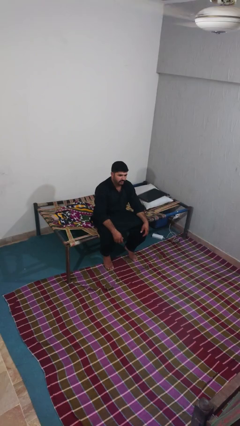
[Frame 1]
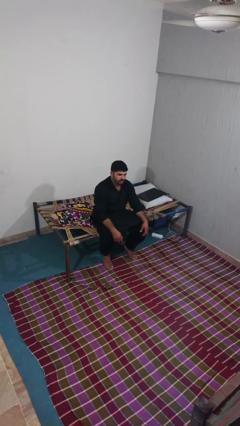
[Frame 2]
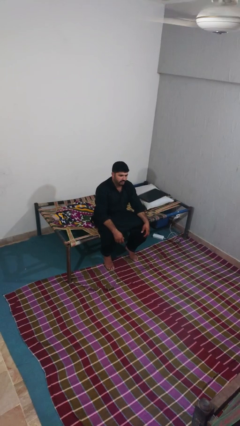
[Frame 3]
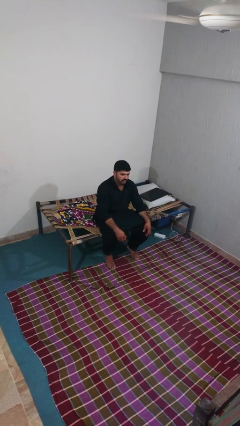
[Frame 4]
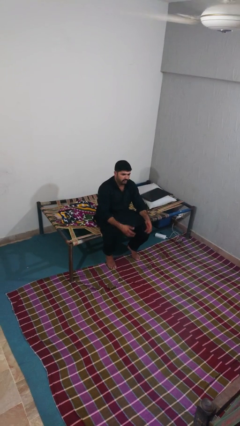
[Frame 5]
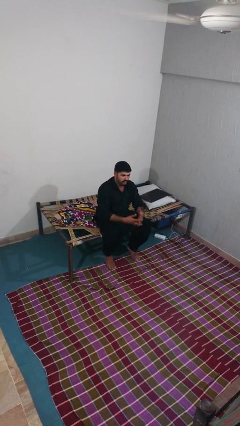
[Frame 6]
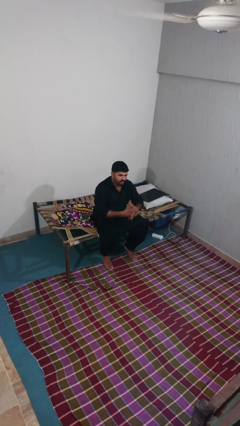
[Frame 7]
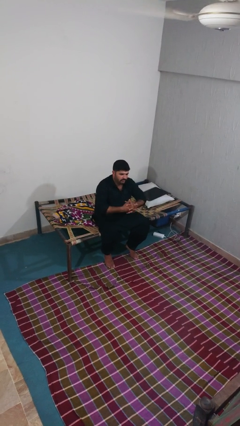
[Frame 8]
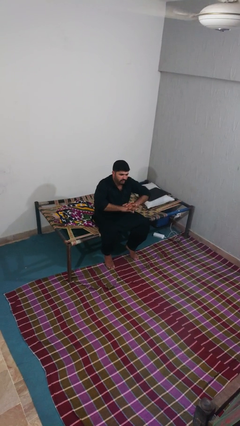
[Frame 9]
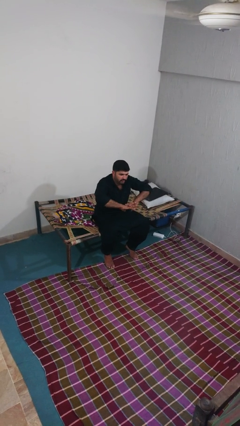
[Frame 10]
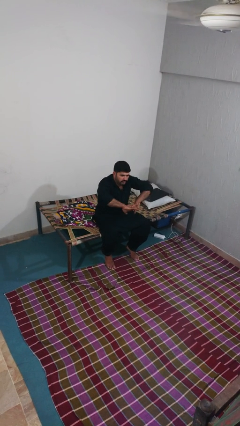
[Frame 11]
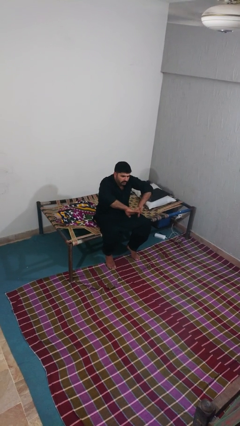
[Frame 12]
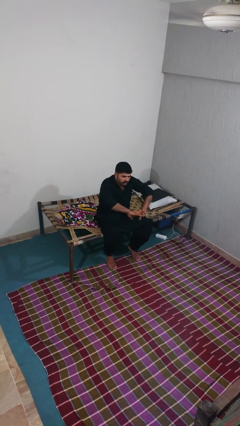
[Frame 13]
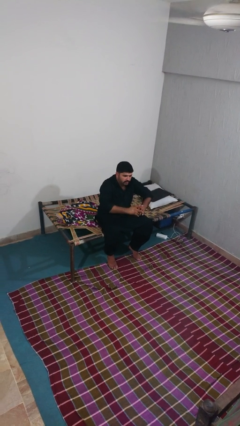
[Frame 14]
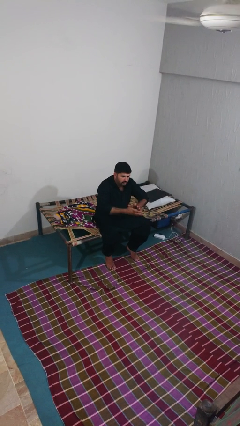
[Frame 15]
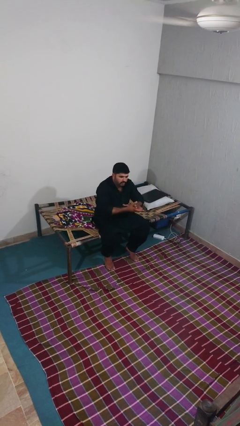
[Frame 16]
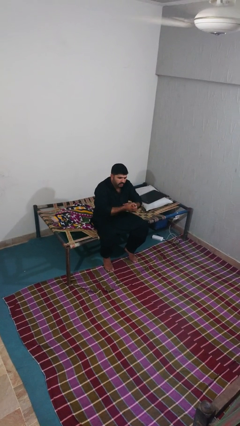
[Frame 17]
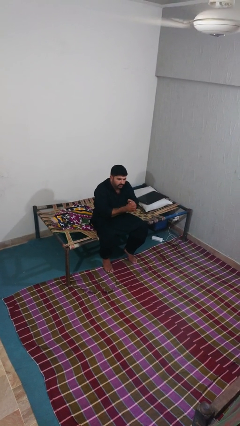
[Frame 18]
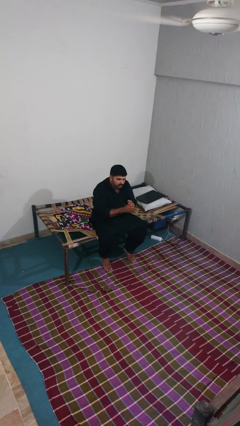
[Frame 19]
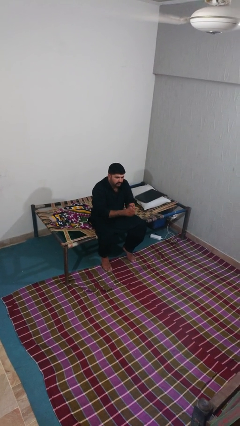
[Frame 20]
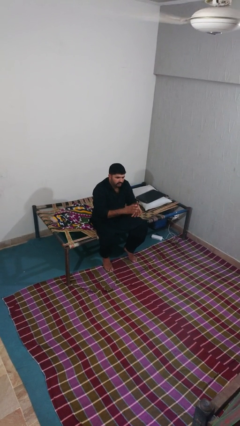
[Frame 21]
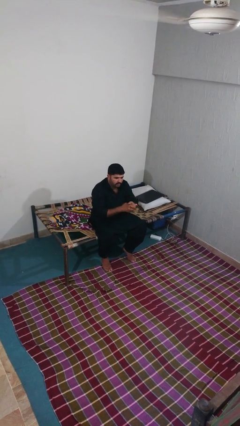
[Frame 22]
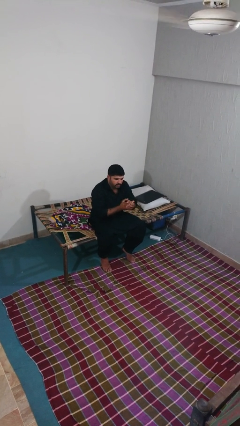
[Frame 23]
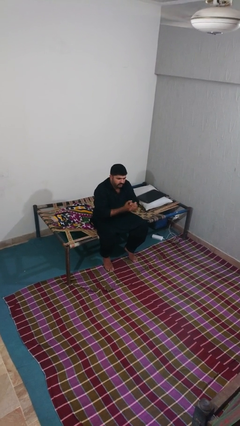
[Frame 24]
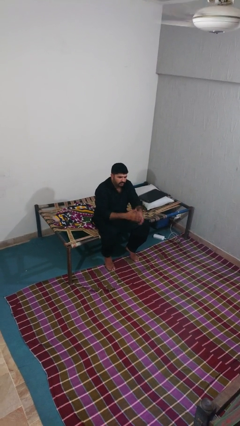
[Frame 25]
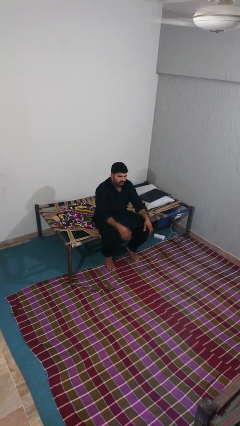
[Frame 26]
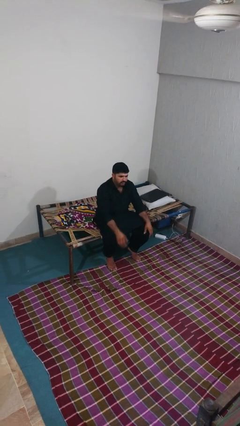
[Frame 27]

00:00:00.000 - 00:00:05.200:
person cracks knuckles

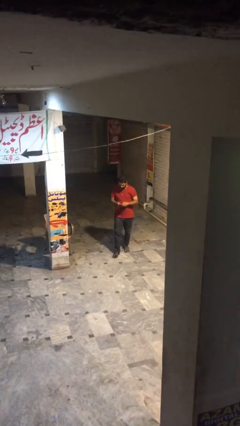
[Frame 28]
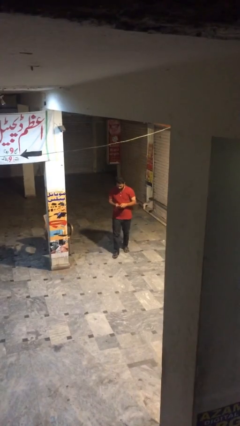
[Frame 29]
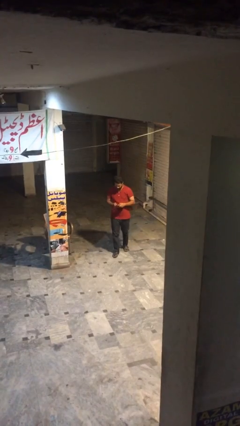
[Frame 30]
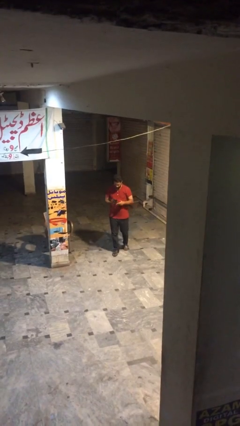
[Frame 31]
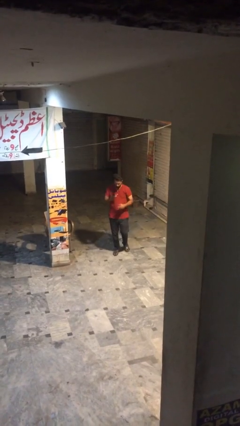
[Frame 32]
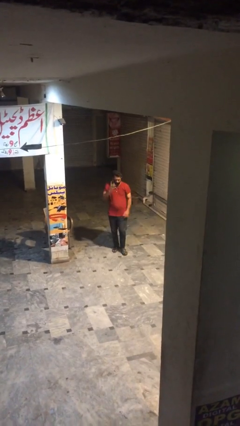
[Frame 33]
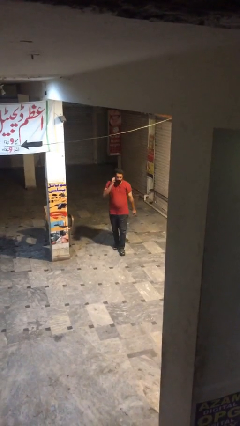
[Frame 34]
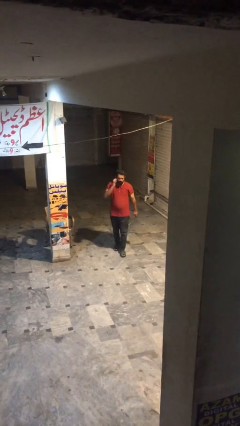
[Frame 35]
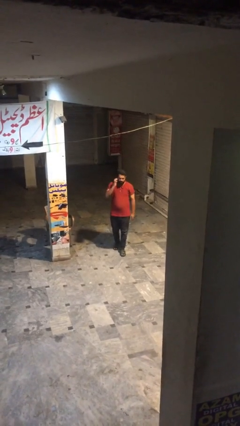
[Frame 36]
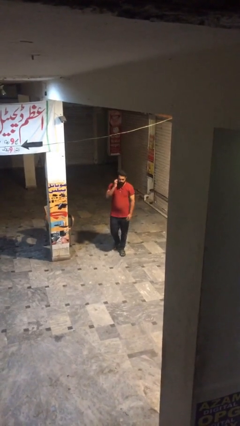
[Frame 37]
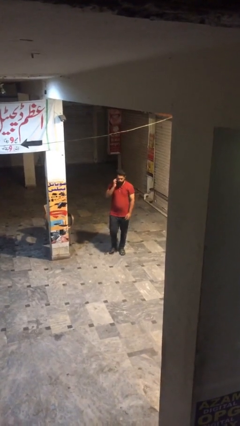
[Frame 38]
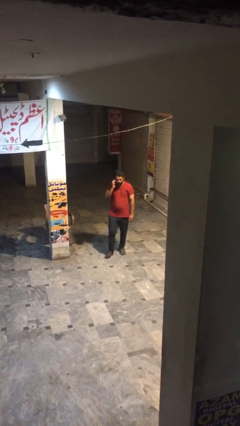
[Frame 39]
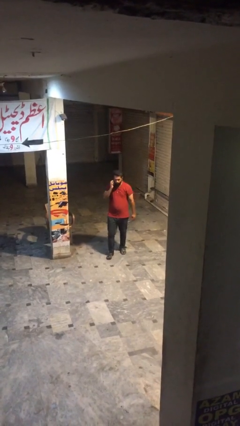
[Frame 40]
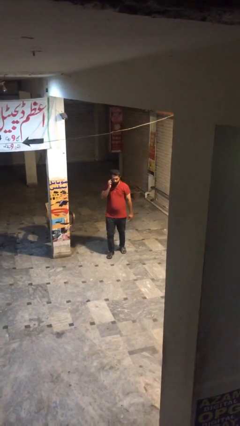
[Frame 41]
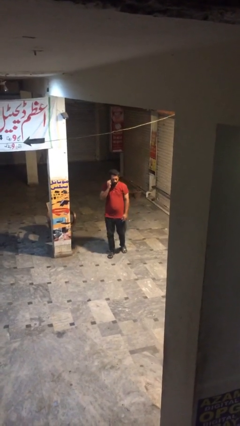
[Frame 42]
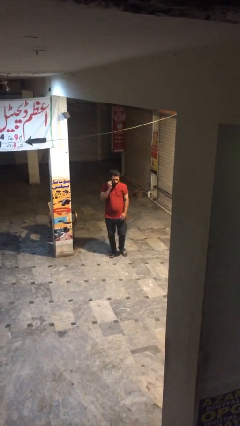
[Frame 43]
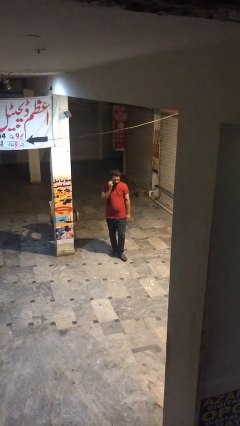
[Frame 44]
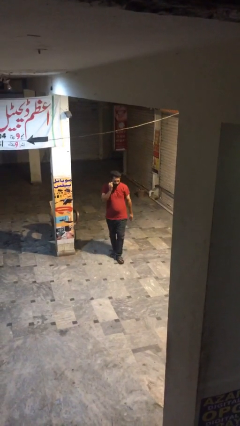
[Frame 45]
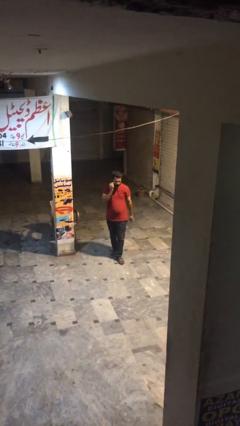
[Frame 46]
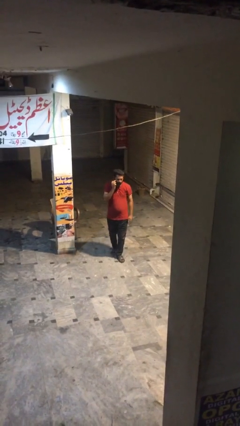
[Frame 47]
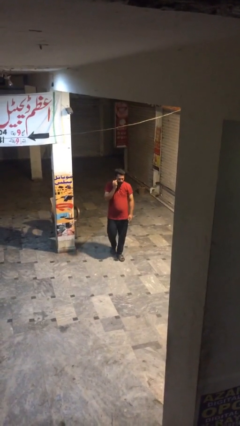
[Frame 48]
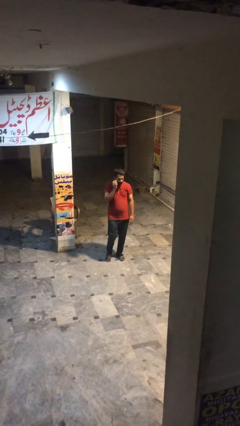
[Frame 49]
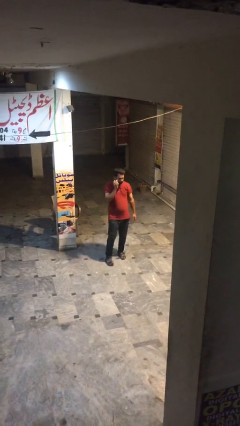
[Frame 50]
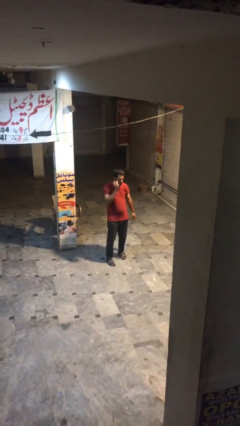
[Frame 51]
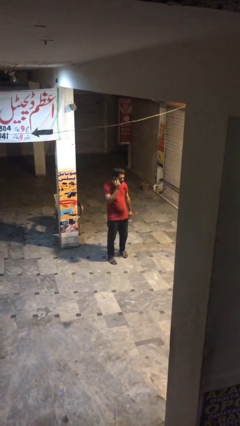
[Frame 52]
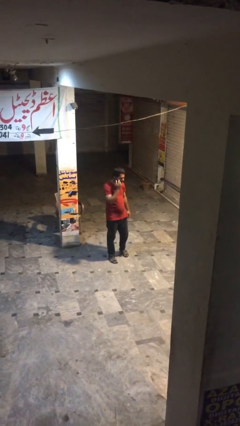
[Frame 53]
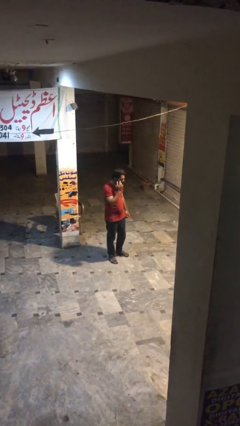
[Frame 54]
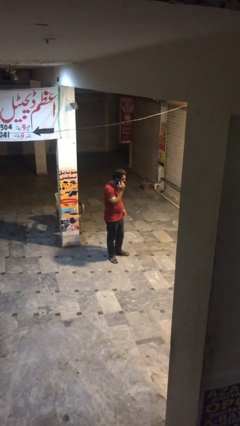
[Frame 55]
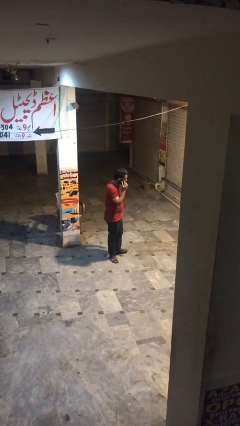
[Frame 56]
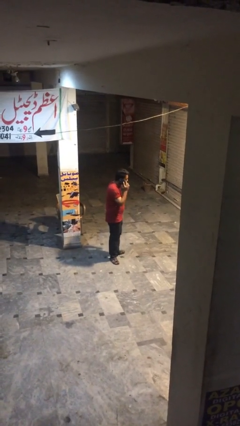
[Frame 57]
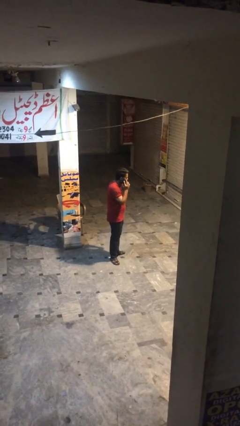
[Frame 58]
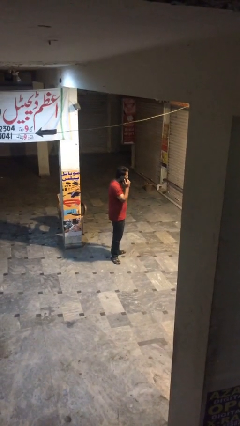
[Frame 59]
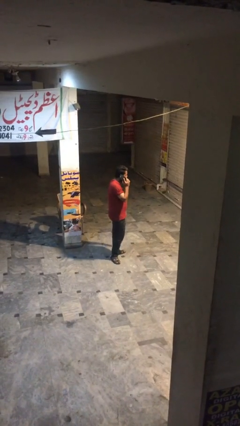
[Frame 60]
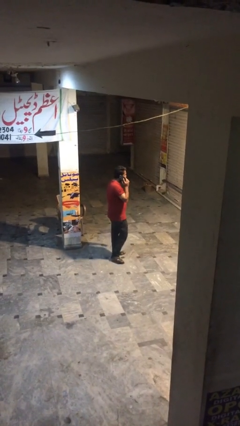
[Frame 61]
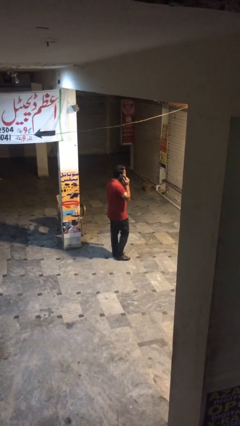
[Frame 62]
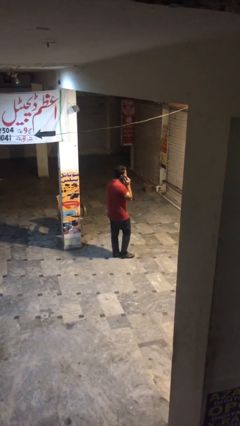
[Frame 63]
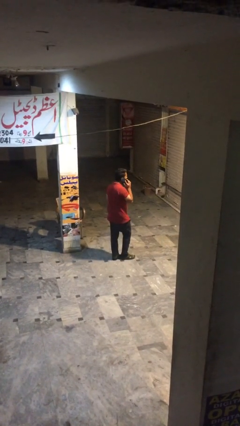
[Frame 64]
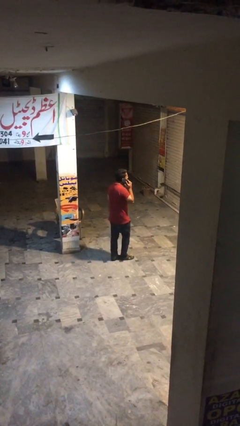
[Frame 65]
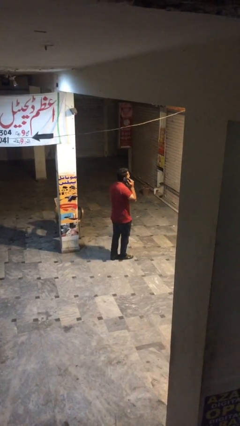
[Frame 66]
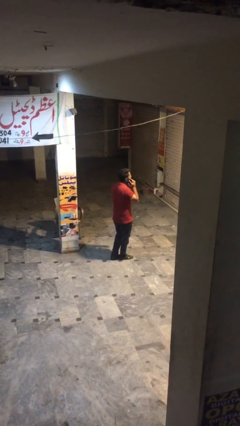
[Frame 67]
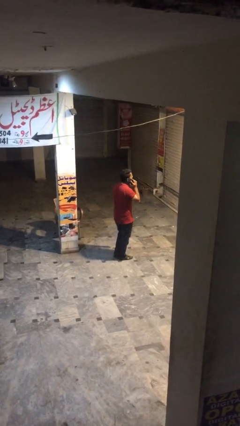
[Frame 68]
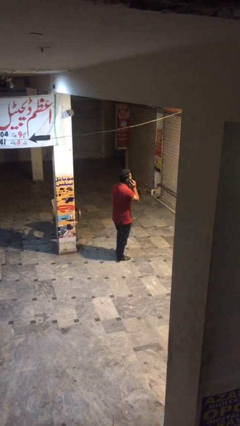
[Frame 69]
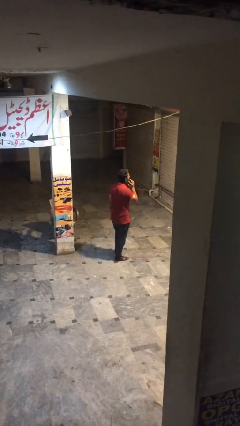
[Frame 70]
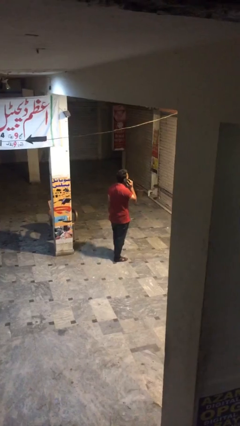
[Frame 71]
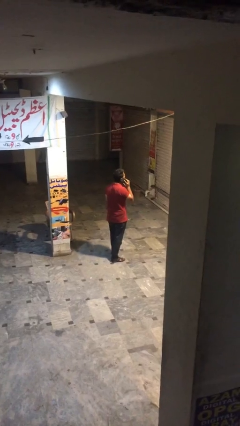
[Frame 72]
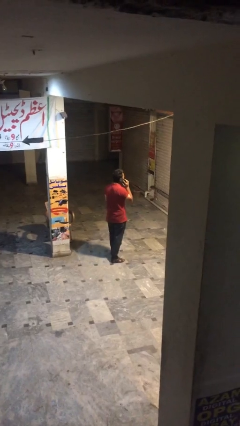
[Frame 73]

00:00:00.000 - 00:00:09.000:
person talks on phone

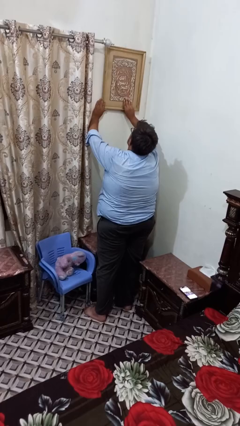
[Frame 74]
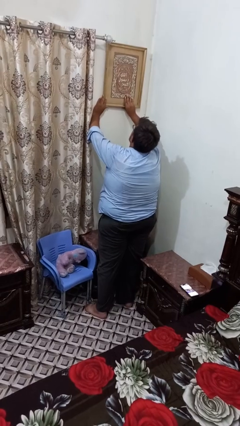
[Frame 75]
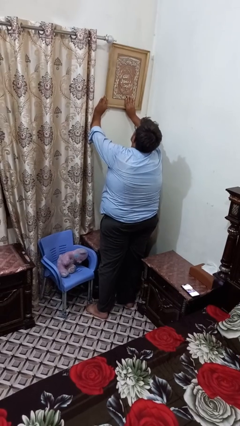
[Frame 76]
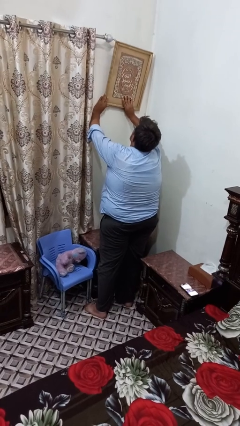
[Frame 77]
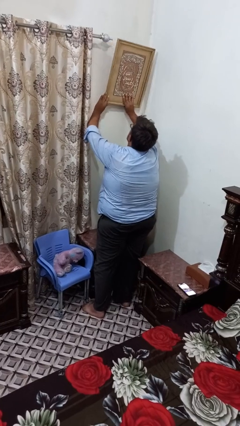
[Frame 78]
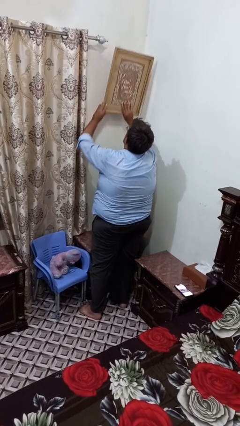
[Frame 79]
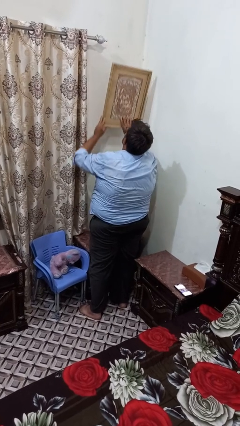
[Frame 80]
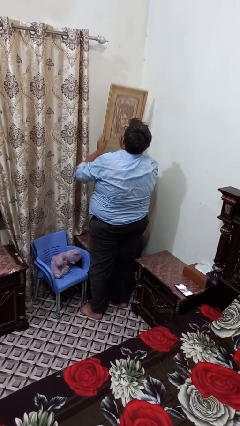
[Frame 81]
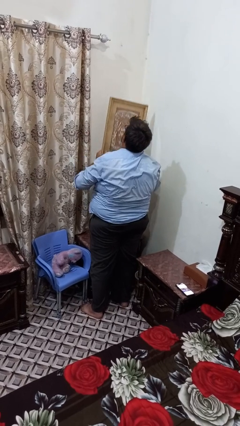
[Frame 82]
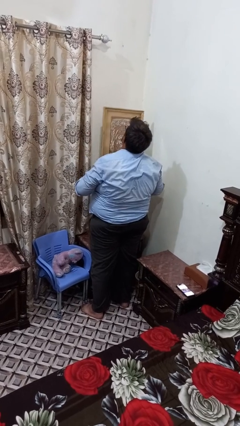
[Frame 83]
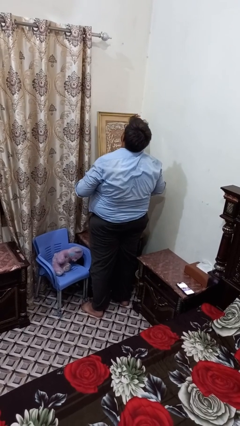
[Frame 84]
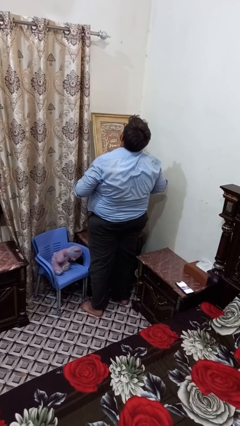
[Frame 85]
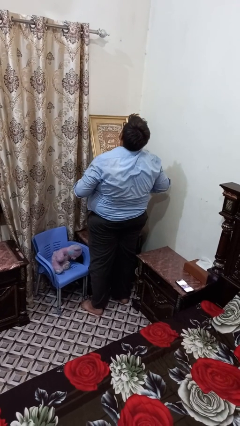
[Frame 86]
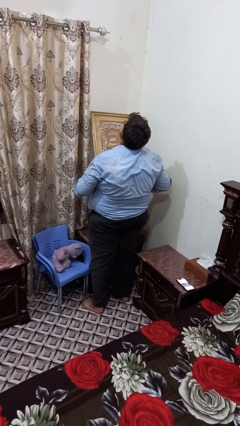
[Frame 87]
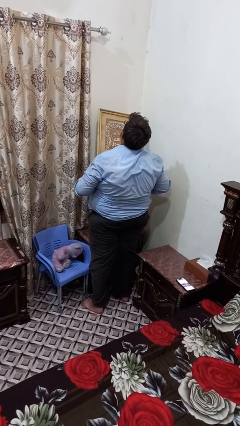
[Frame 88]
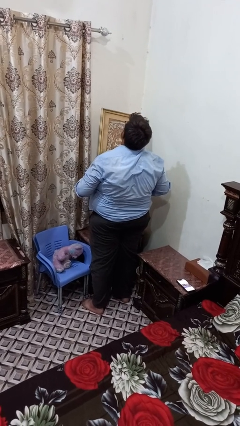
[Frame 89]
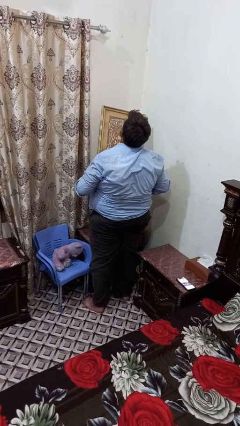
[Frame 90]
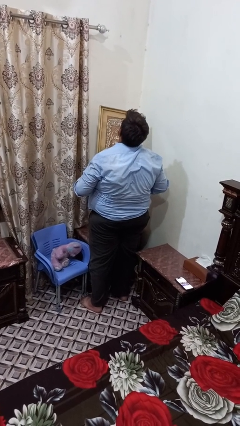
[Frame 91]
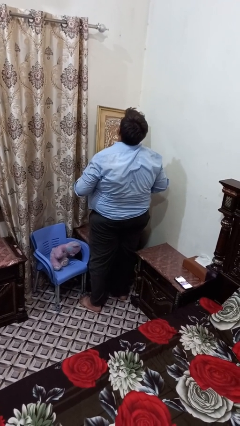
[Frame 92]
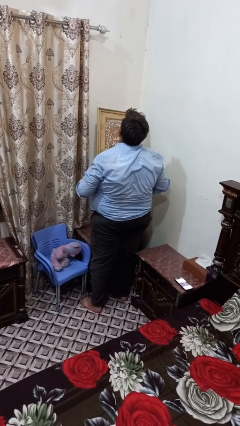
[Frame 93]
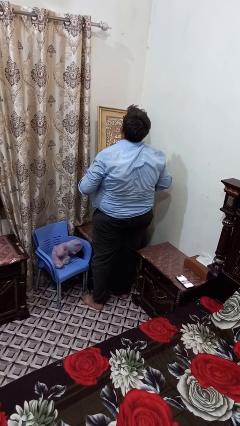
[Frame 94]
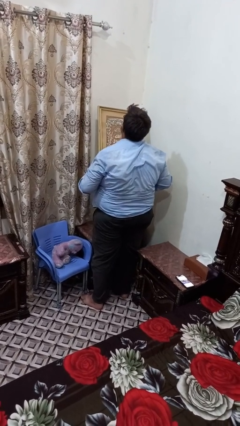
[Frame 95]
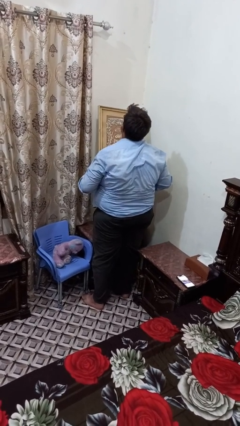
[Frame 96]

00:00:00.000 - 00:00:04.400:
person takes down picture frame
